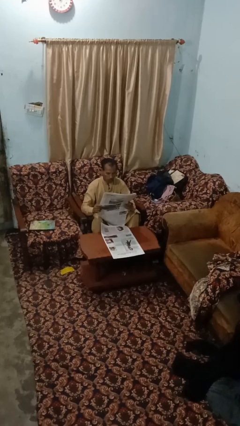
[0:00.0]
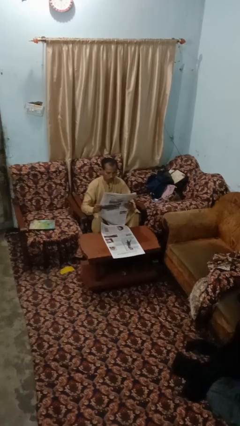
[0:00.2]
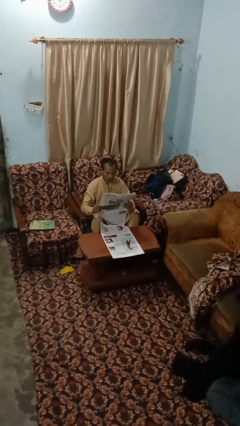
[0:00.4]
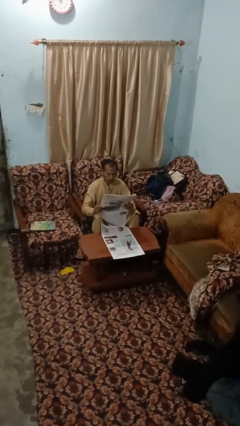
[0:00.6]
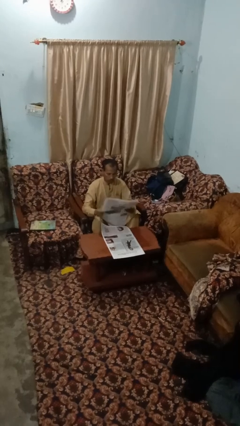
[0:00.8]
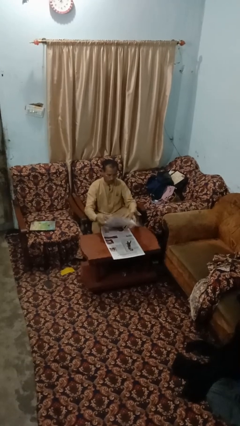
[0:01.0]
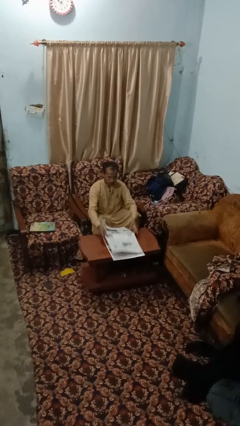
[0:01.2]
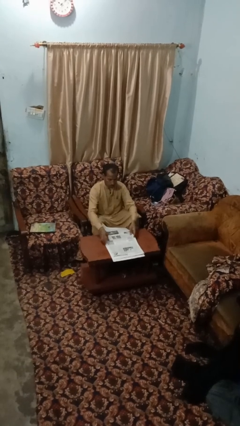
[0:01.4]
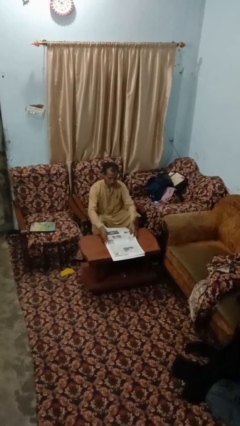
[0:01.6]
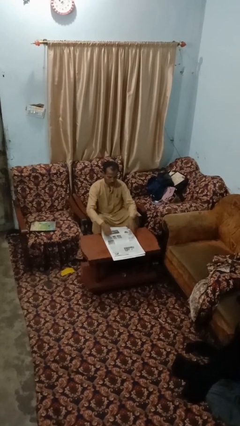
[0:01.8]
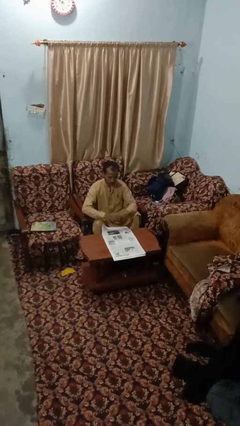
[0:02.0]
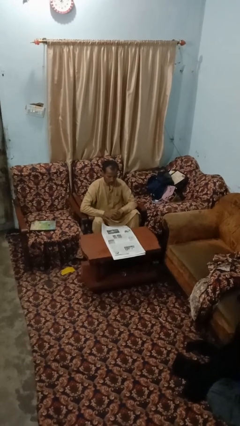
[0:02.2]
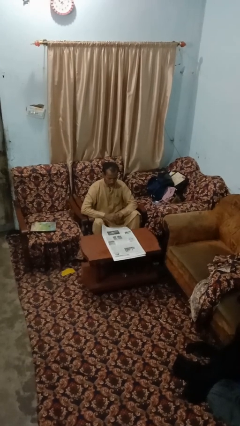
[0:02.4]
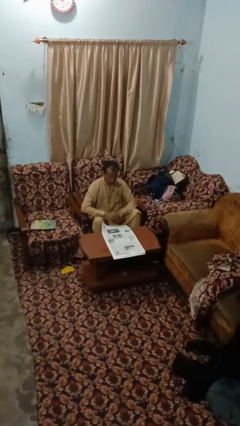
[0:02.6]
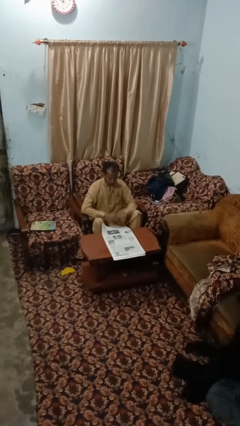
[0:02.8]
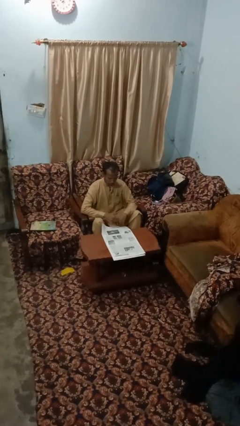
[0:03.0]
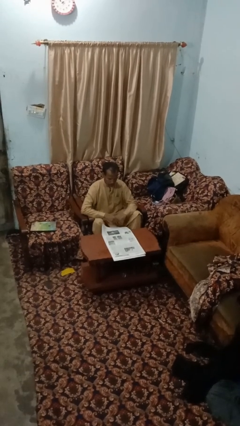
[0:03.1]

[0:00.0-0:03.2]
person reads newspaper

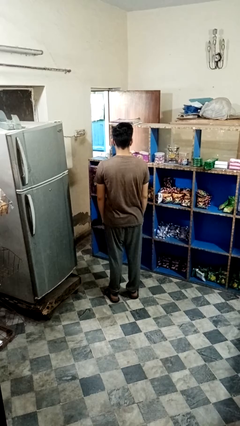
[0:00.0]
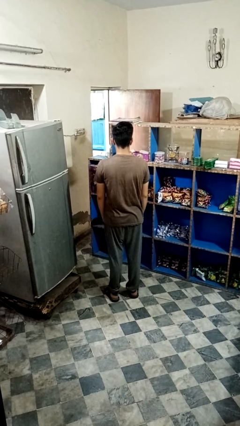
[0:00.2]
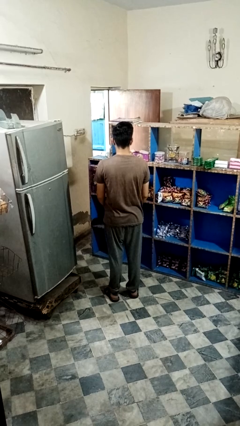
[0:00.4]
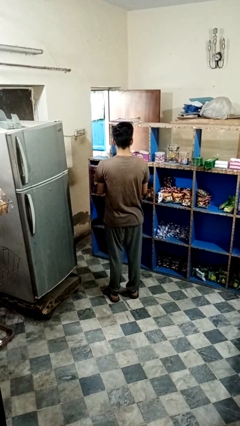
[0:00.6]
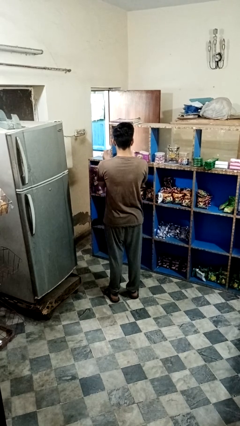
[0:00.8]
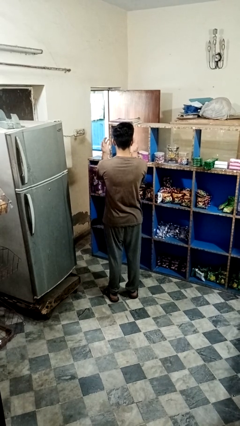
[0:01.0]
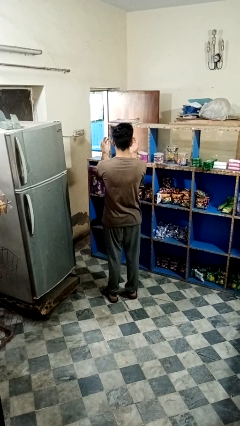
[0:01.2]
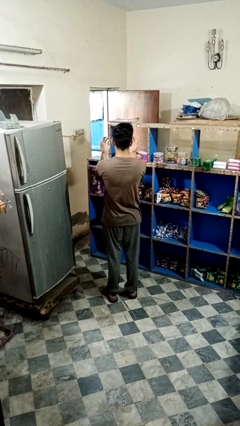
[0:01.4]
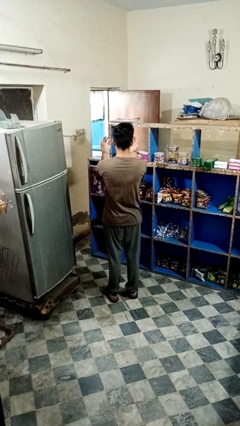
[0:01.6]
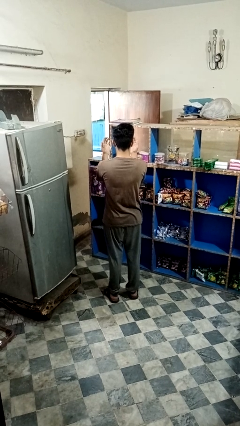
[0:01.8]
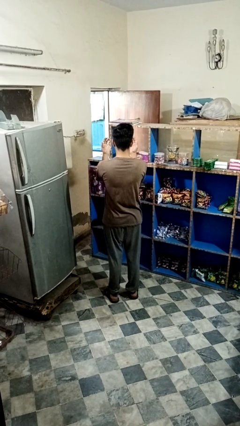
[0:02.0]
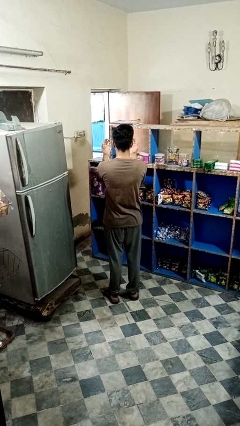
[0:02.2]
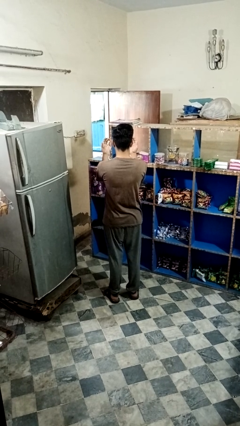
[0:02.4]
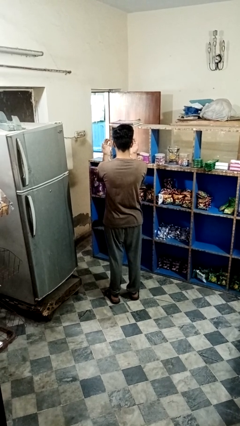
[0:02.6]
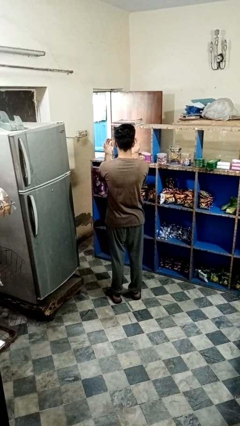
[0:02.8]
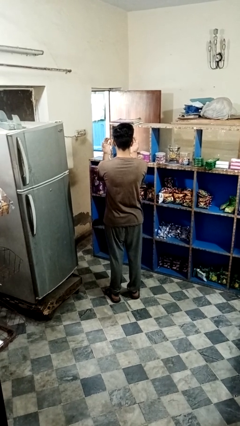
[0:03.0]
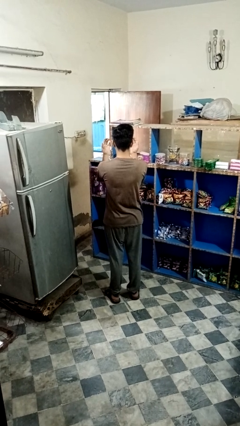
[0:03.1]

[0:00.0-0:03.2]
person prays

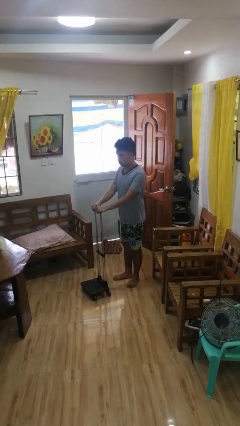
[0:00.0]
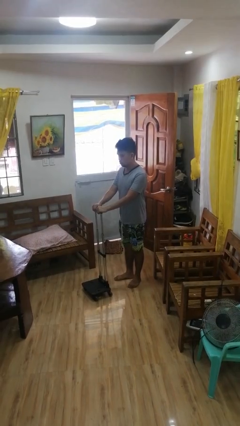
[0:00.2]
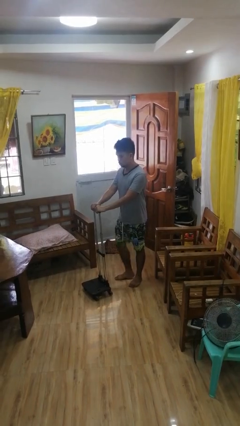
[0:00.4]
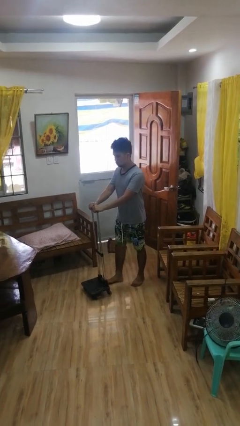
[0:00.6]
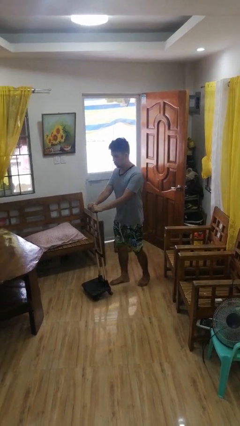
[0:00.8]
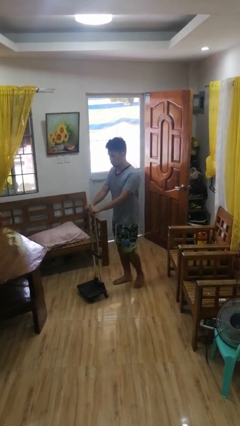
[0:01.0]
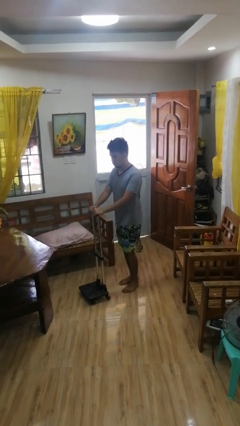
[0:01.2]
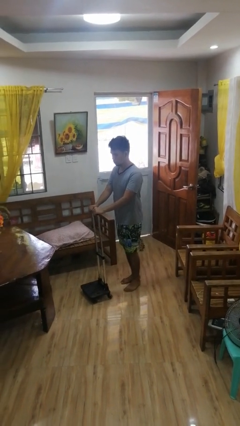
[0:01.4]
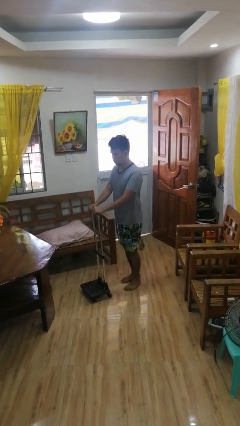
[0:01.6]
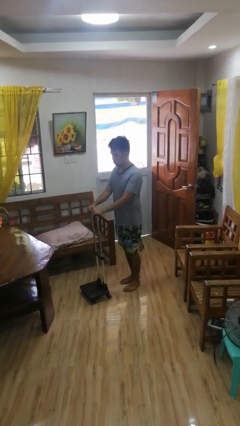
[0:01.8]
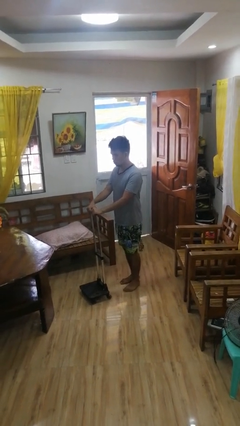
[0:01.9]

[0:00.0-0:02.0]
person pushes wheeled cart

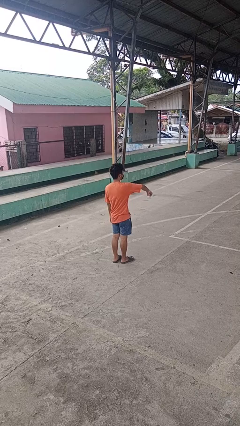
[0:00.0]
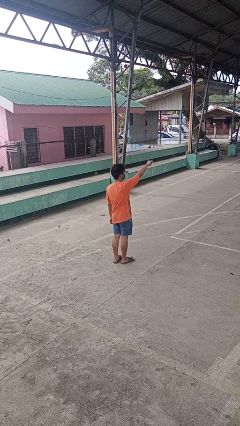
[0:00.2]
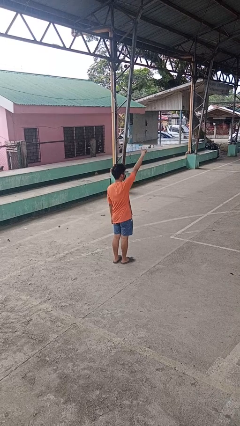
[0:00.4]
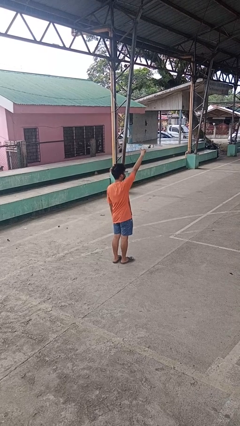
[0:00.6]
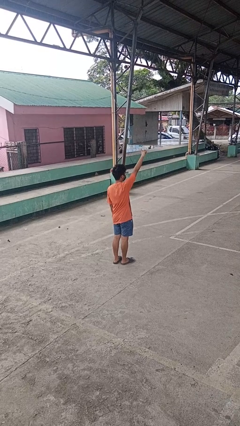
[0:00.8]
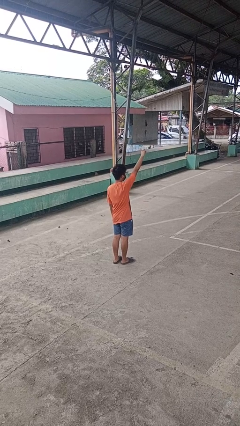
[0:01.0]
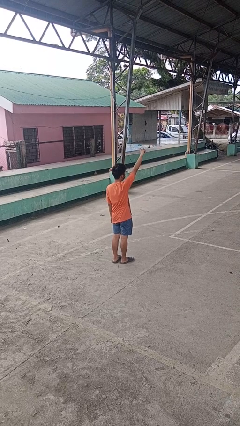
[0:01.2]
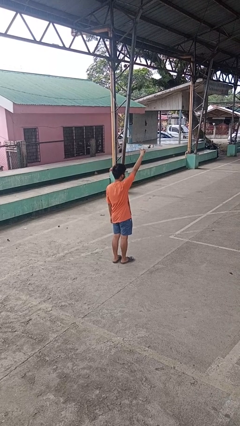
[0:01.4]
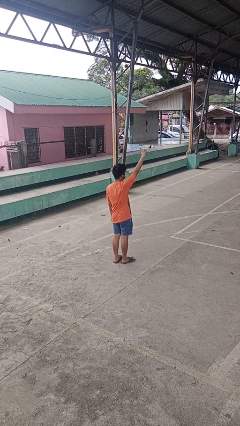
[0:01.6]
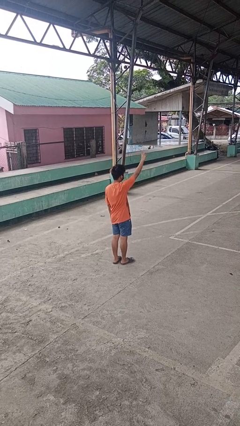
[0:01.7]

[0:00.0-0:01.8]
person gestures swipe up

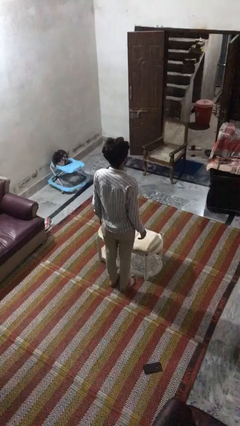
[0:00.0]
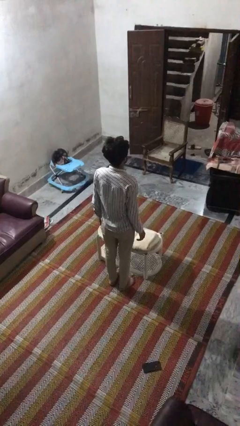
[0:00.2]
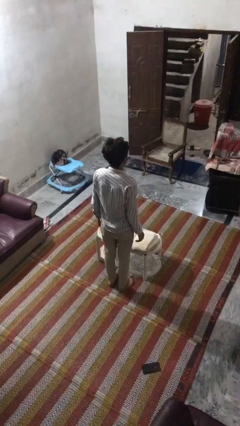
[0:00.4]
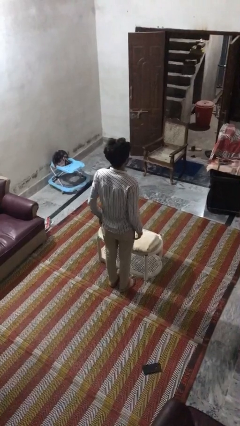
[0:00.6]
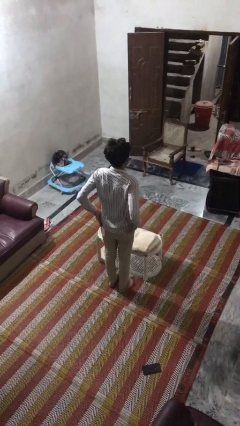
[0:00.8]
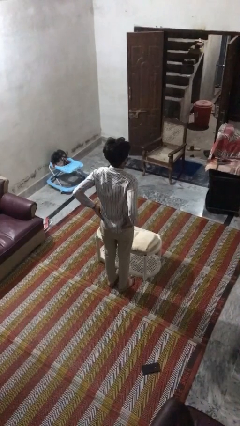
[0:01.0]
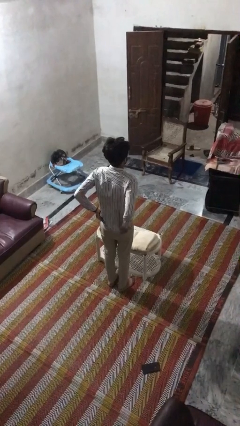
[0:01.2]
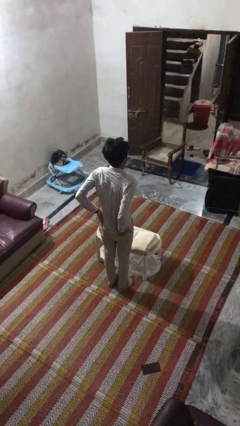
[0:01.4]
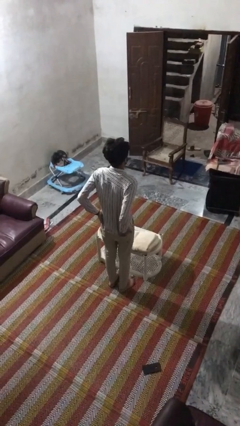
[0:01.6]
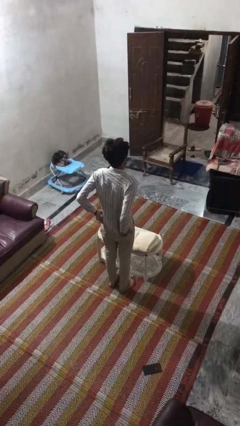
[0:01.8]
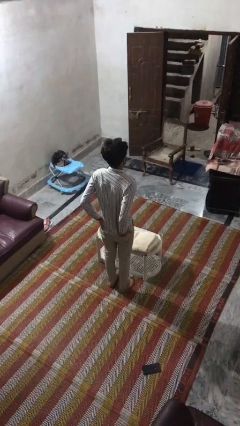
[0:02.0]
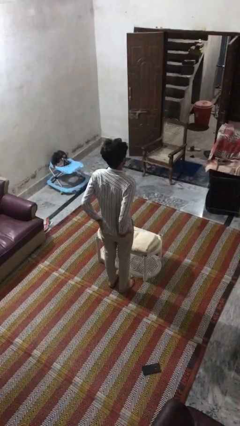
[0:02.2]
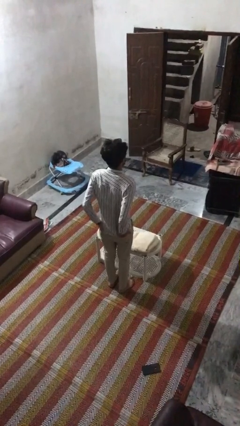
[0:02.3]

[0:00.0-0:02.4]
person puts hands in back pockets

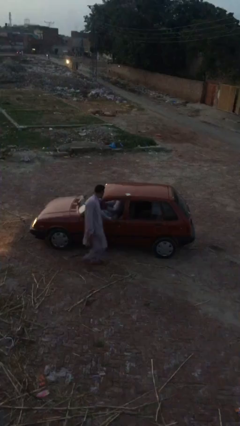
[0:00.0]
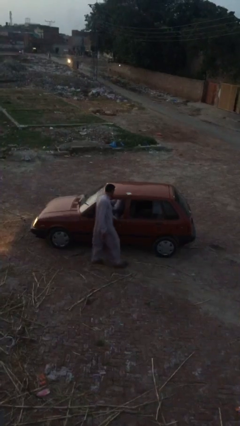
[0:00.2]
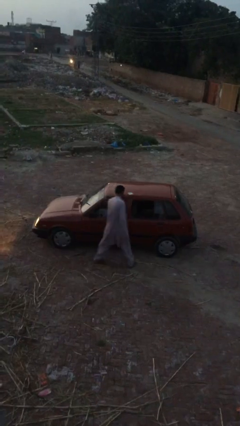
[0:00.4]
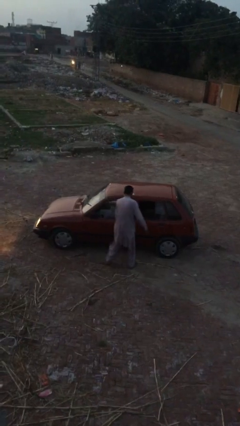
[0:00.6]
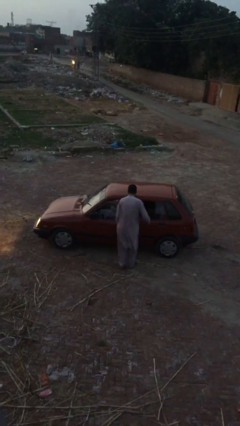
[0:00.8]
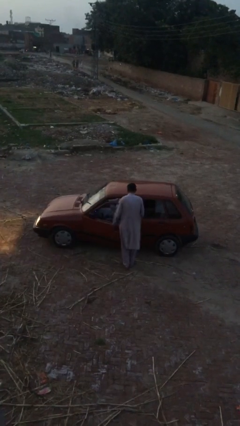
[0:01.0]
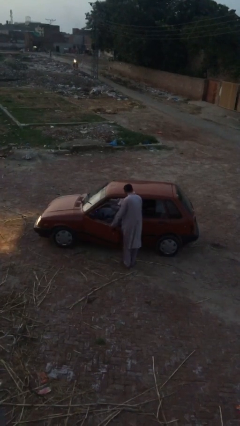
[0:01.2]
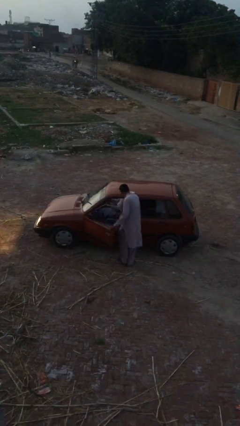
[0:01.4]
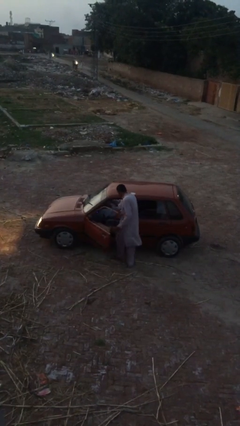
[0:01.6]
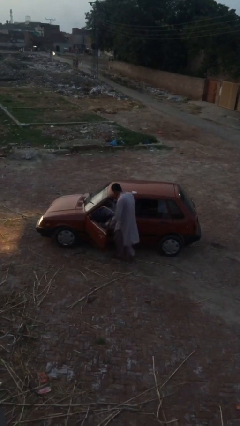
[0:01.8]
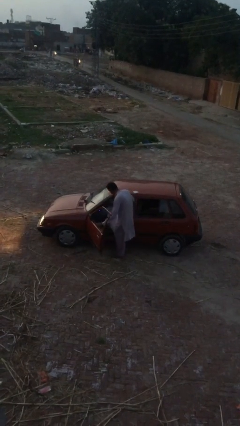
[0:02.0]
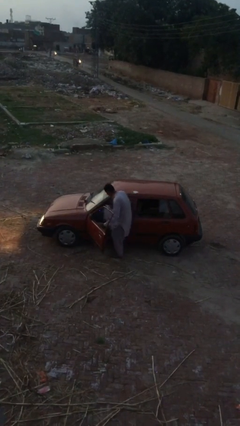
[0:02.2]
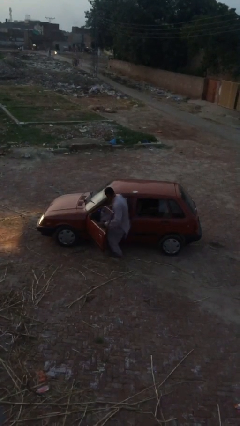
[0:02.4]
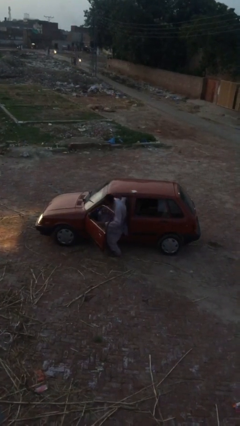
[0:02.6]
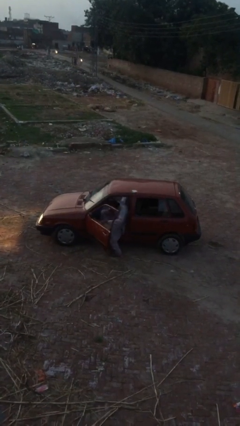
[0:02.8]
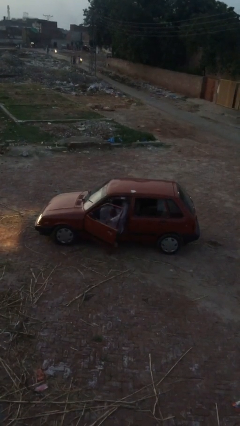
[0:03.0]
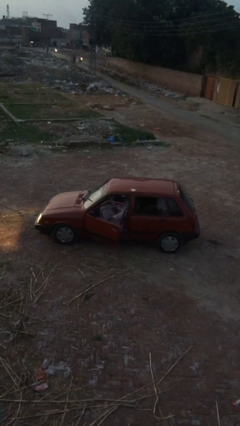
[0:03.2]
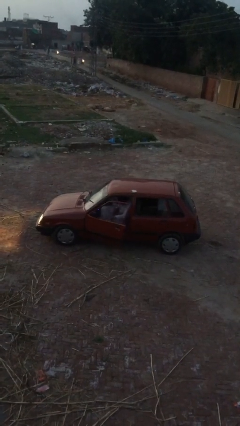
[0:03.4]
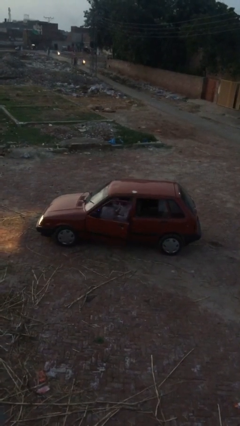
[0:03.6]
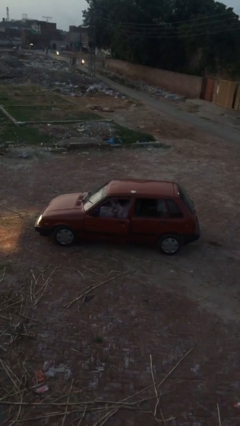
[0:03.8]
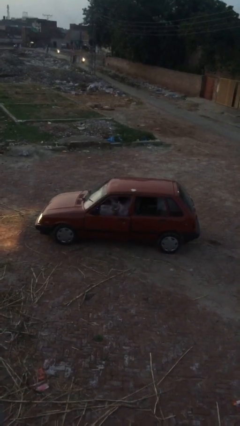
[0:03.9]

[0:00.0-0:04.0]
car picks up person

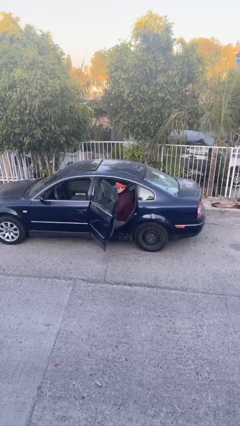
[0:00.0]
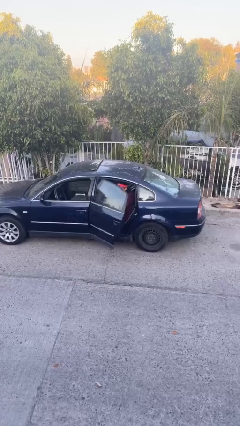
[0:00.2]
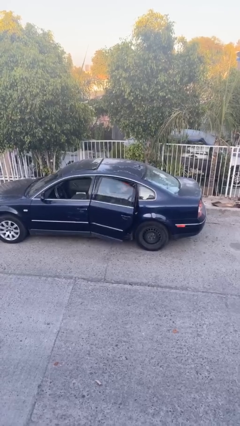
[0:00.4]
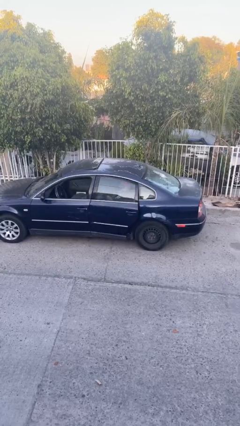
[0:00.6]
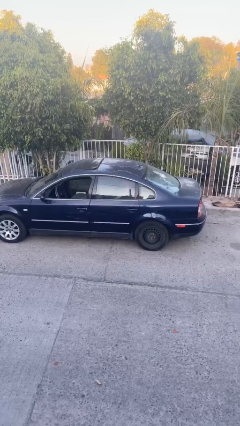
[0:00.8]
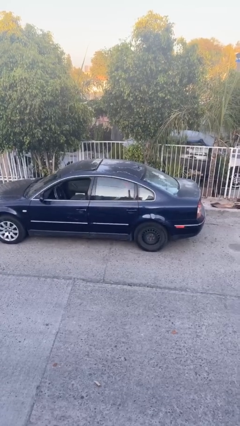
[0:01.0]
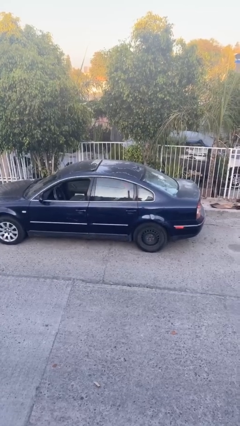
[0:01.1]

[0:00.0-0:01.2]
person closes car door
